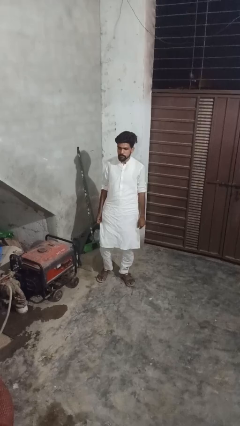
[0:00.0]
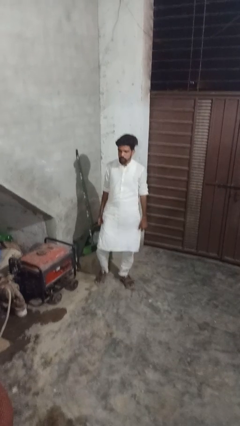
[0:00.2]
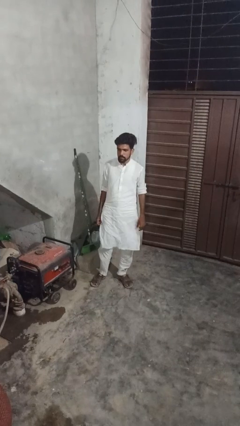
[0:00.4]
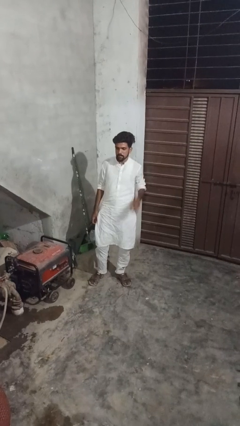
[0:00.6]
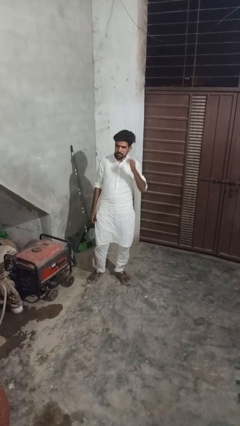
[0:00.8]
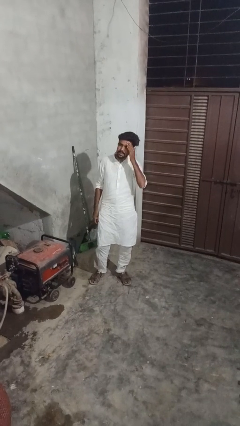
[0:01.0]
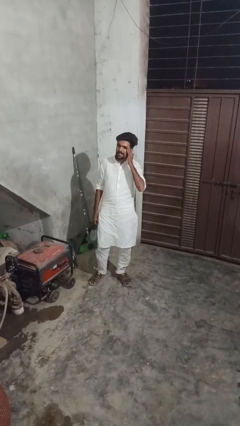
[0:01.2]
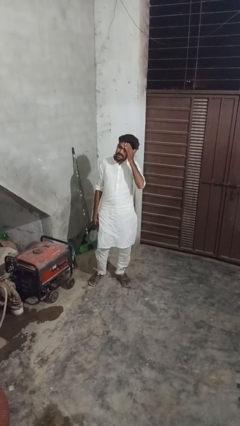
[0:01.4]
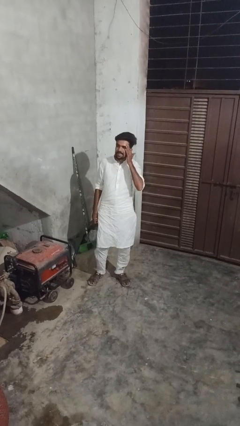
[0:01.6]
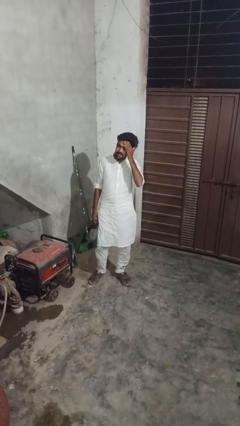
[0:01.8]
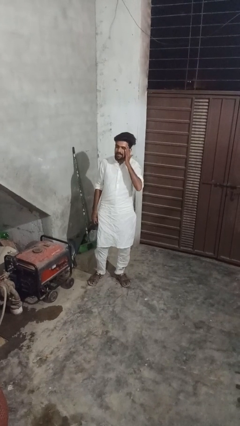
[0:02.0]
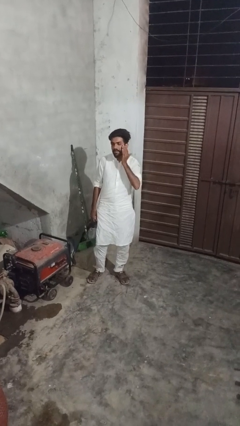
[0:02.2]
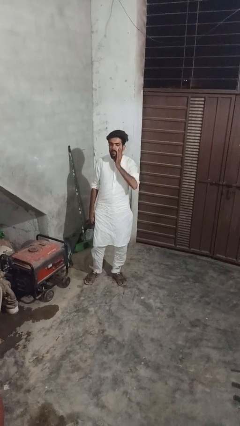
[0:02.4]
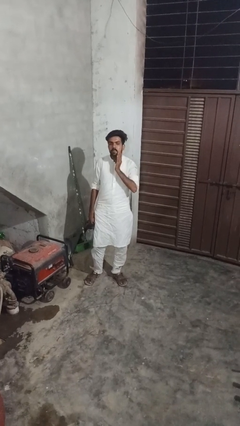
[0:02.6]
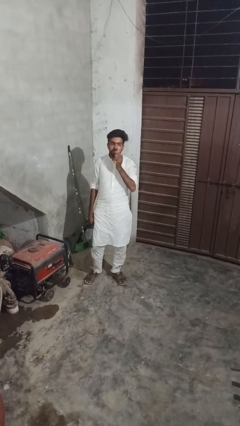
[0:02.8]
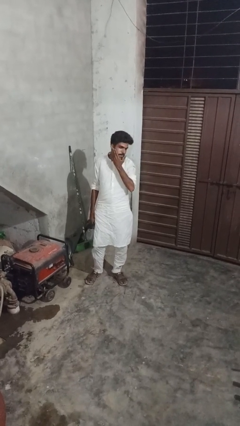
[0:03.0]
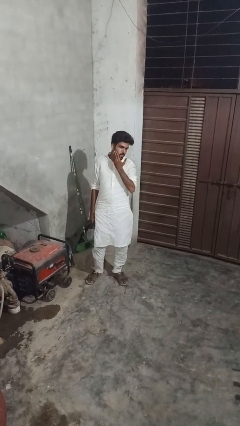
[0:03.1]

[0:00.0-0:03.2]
person scratches face

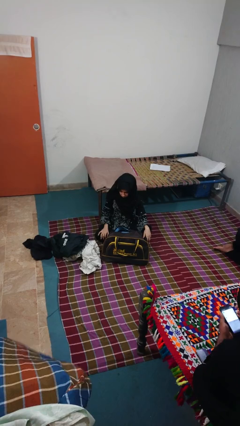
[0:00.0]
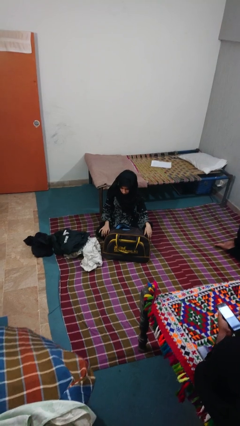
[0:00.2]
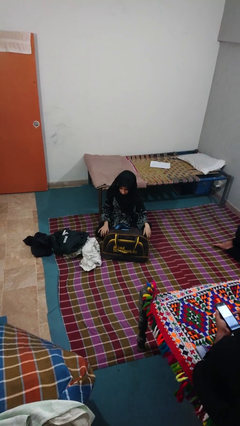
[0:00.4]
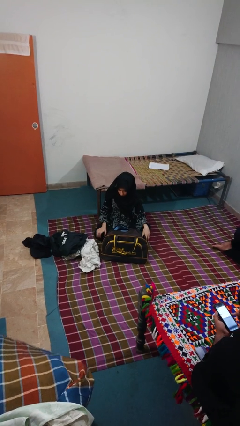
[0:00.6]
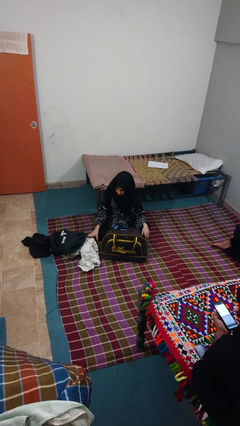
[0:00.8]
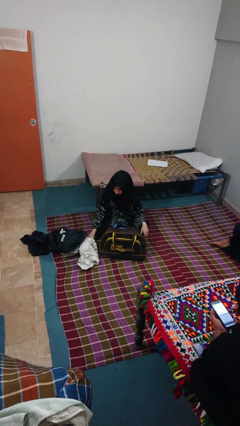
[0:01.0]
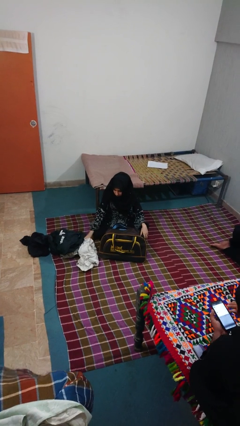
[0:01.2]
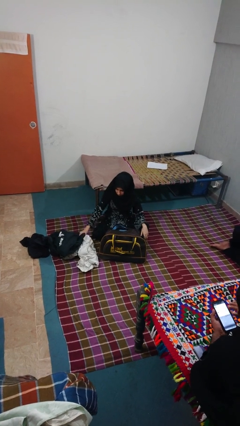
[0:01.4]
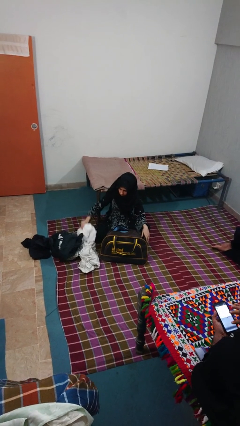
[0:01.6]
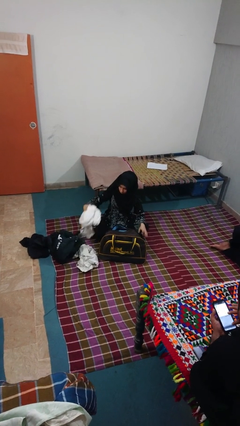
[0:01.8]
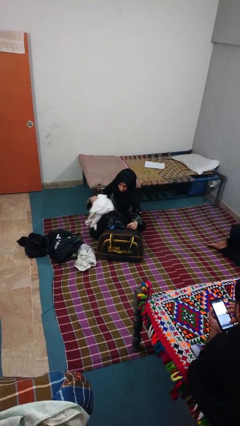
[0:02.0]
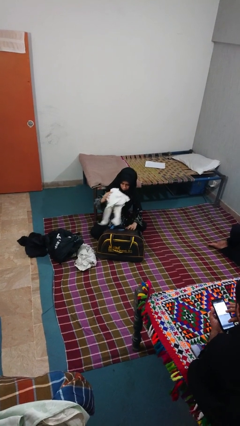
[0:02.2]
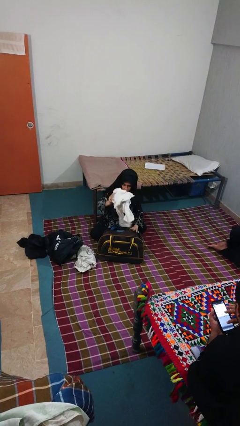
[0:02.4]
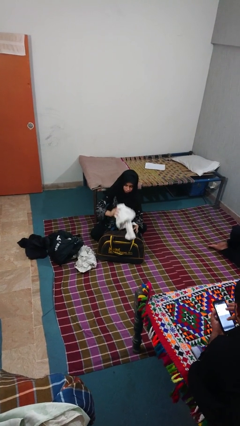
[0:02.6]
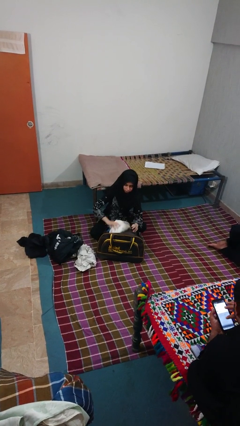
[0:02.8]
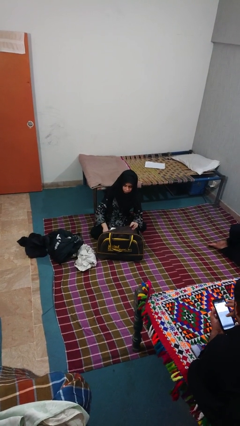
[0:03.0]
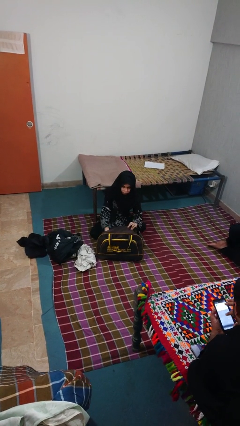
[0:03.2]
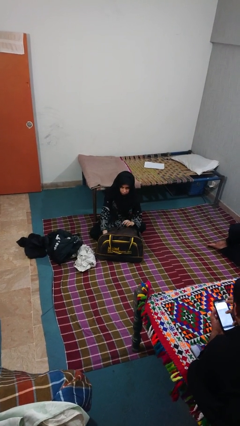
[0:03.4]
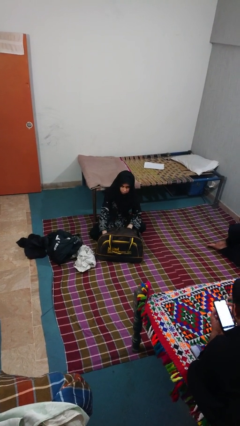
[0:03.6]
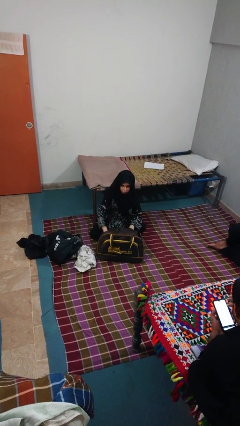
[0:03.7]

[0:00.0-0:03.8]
person loads clothes into suitcase

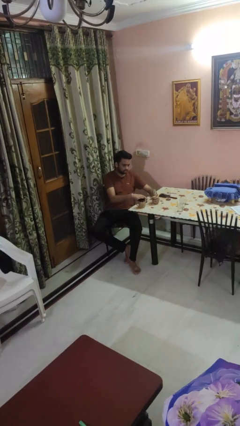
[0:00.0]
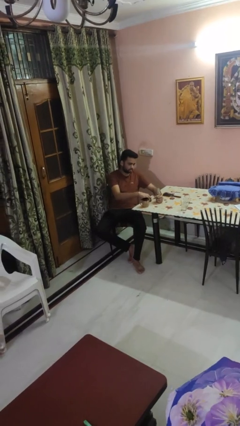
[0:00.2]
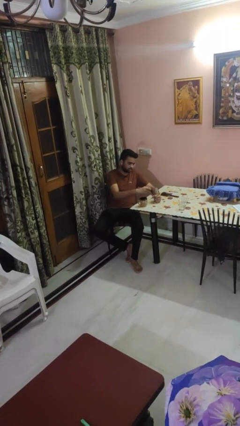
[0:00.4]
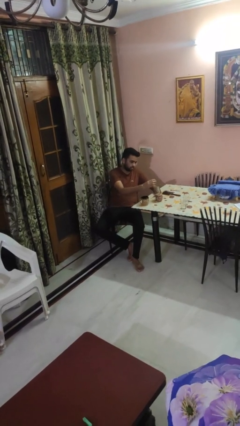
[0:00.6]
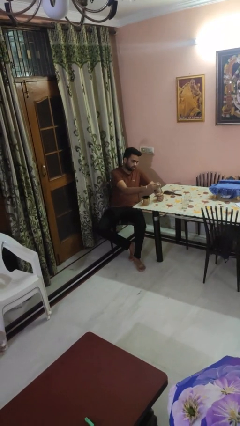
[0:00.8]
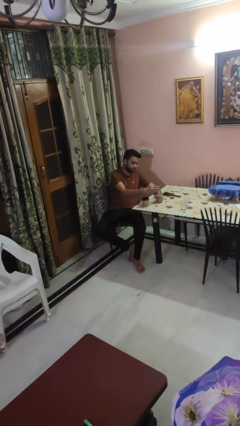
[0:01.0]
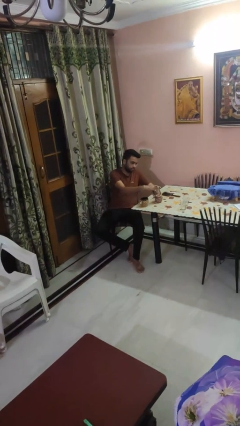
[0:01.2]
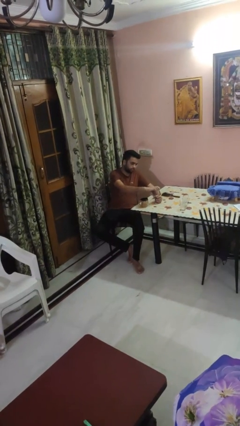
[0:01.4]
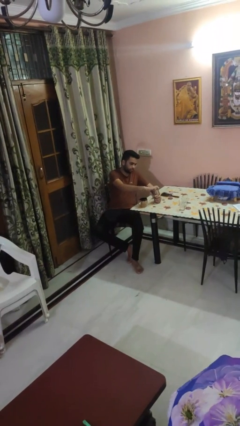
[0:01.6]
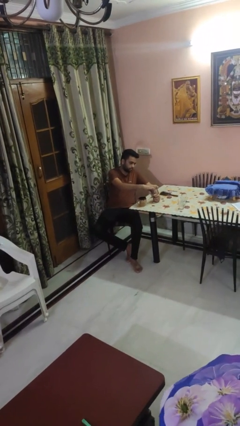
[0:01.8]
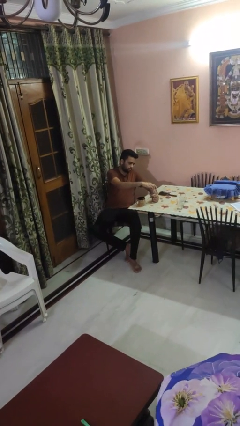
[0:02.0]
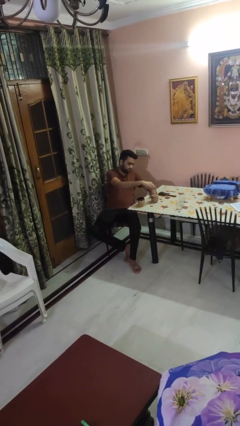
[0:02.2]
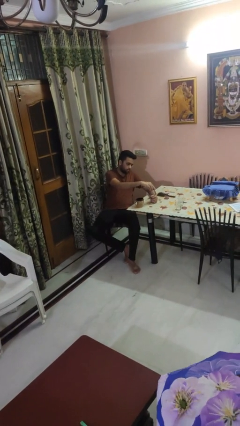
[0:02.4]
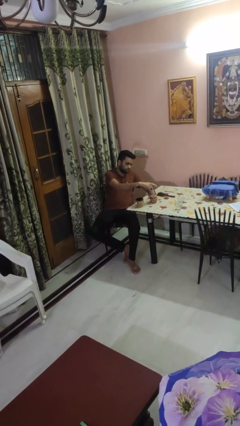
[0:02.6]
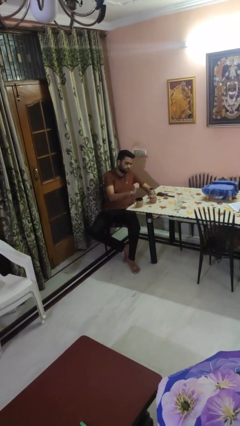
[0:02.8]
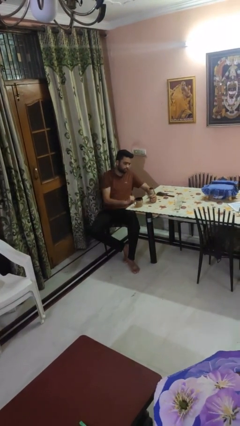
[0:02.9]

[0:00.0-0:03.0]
person screws lid to bottle

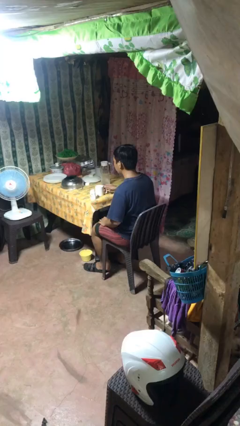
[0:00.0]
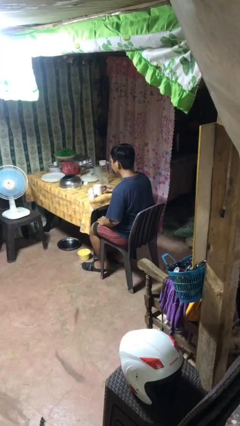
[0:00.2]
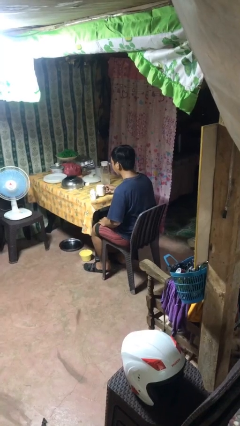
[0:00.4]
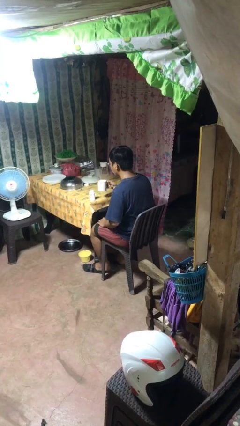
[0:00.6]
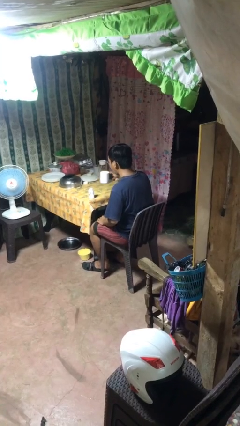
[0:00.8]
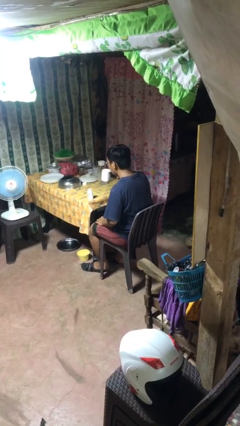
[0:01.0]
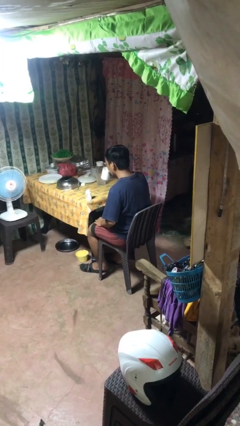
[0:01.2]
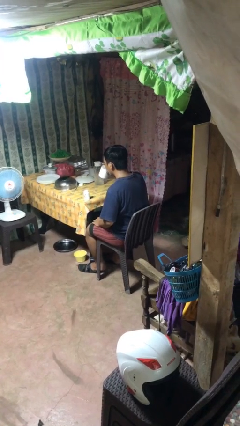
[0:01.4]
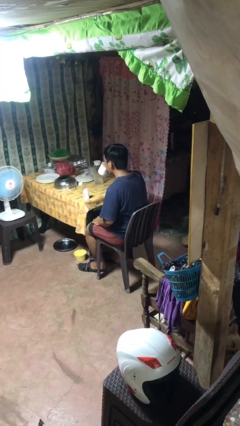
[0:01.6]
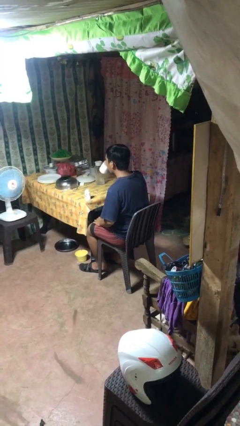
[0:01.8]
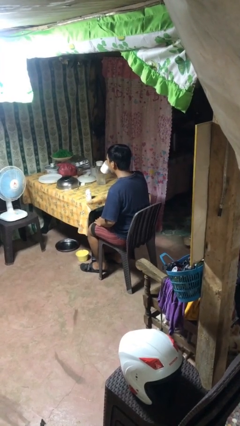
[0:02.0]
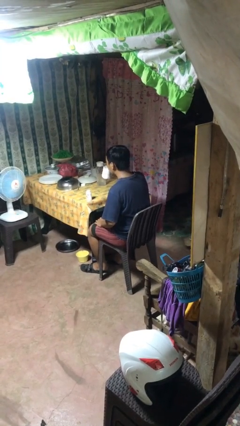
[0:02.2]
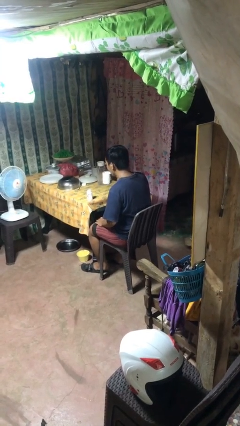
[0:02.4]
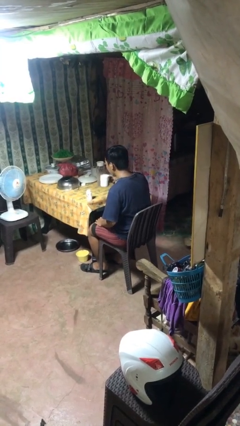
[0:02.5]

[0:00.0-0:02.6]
person drinks from cup

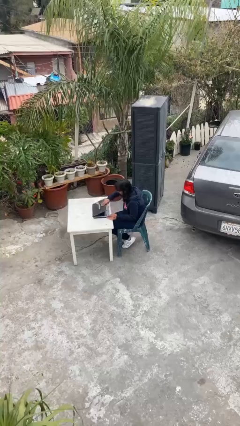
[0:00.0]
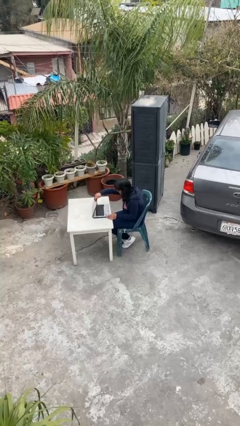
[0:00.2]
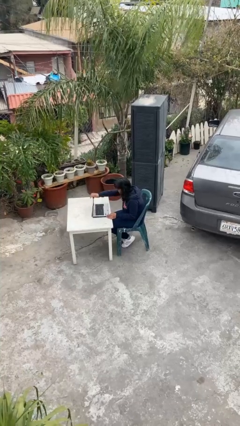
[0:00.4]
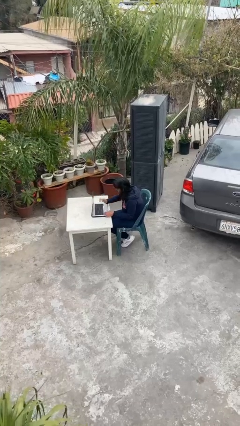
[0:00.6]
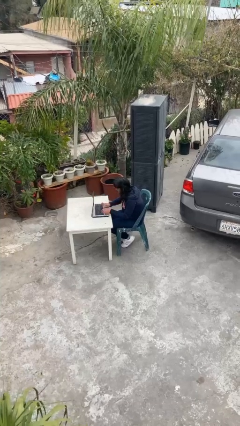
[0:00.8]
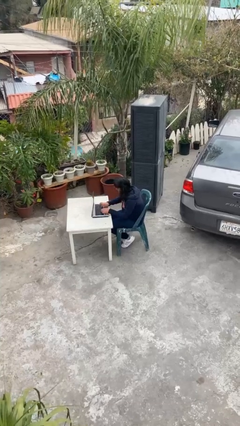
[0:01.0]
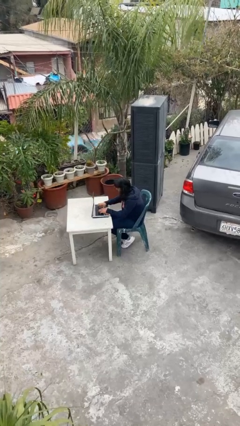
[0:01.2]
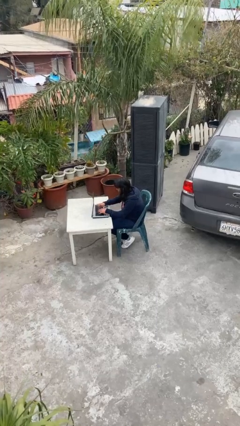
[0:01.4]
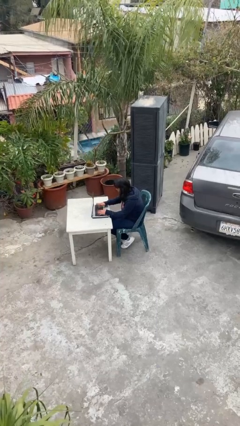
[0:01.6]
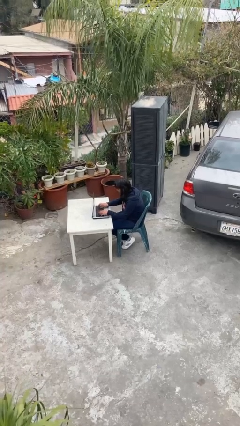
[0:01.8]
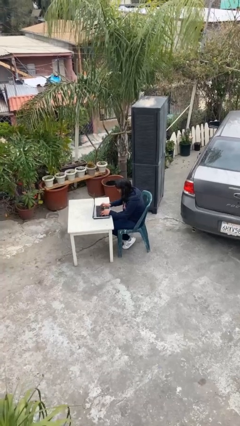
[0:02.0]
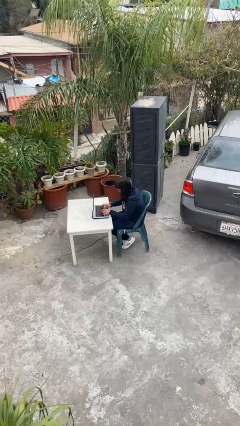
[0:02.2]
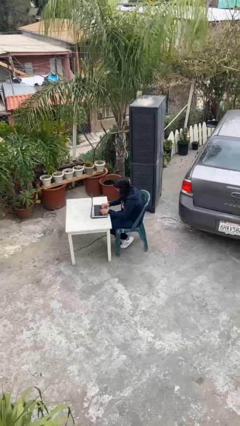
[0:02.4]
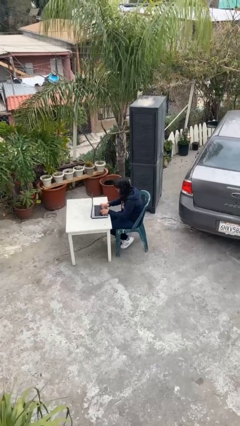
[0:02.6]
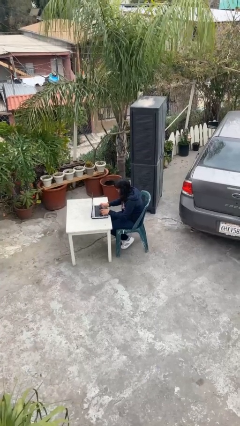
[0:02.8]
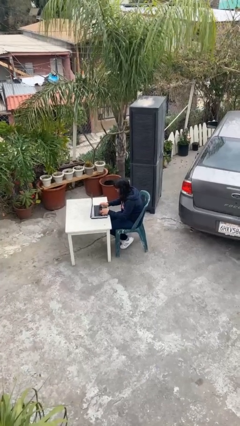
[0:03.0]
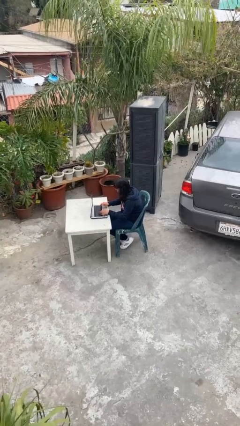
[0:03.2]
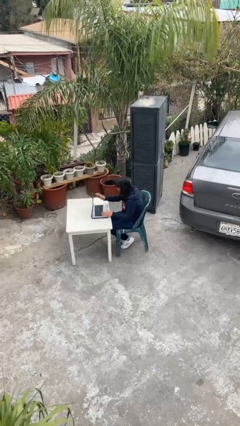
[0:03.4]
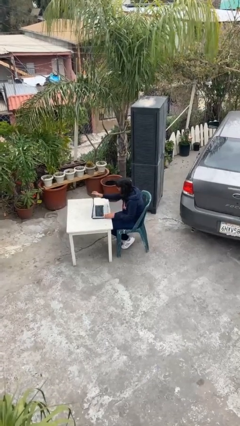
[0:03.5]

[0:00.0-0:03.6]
person interacts with laptop

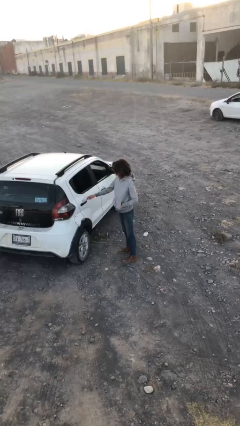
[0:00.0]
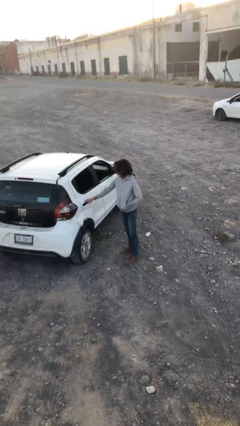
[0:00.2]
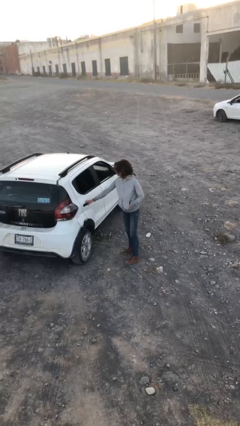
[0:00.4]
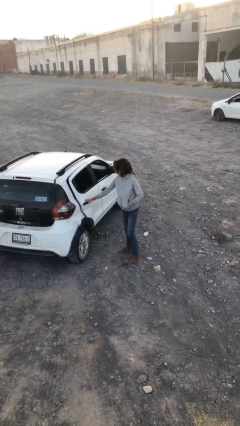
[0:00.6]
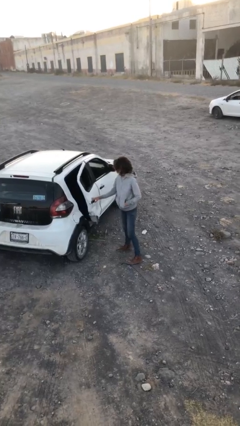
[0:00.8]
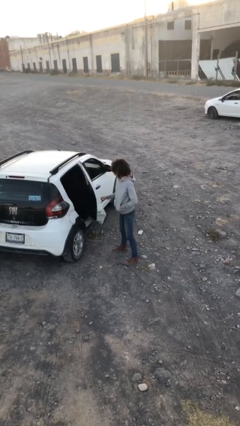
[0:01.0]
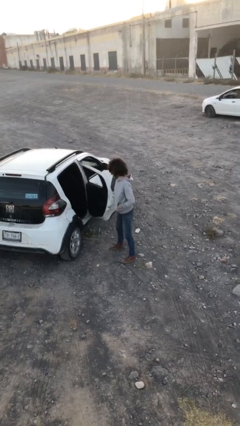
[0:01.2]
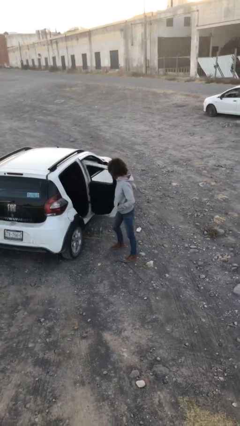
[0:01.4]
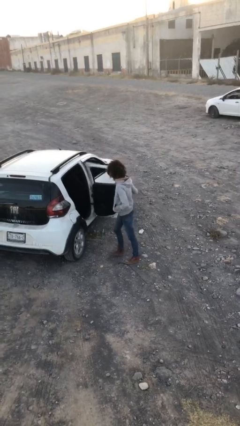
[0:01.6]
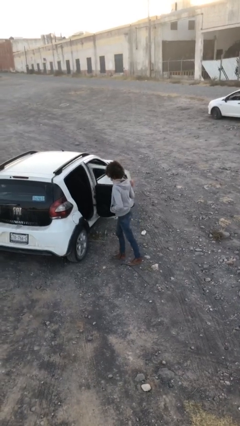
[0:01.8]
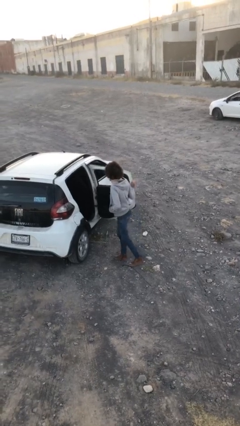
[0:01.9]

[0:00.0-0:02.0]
person opens car door
